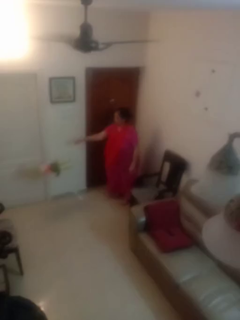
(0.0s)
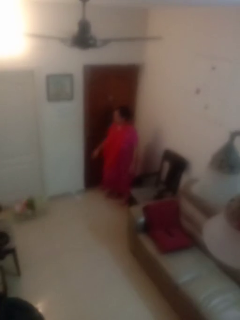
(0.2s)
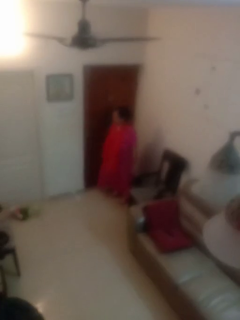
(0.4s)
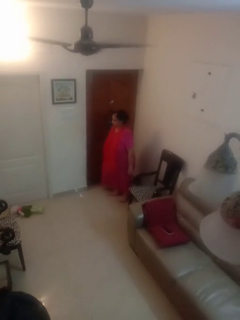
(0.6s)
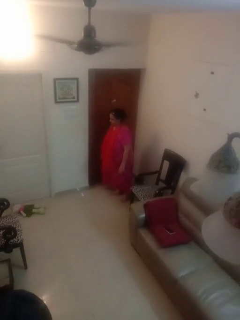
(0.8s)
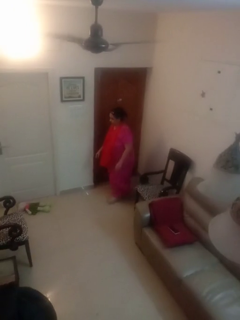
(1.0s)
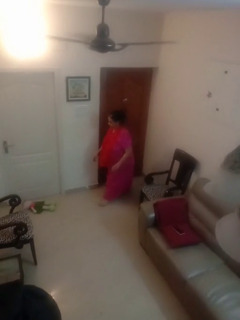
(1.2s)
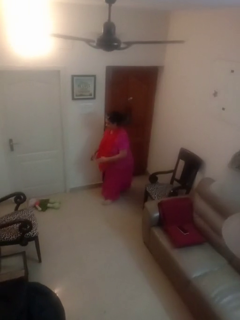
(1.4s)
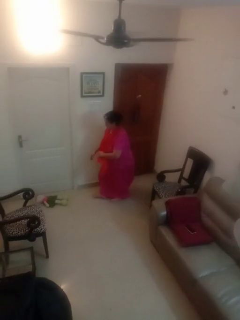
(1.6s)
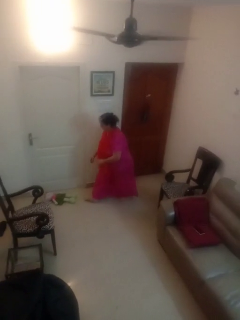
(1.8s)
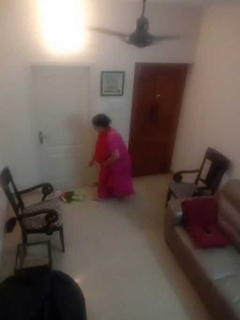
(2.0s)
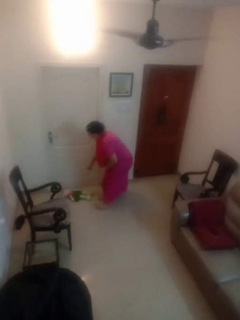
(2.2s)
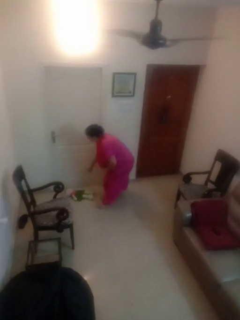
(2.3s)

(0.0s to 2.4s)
person throws object to ground

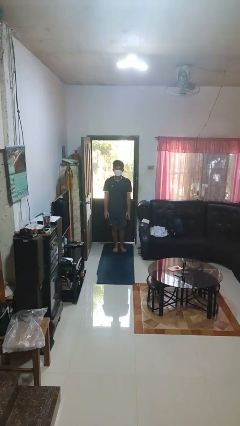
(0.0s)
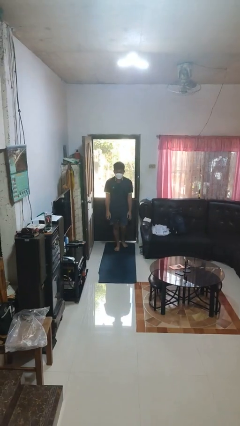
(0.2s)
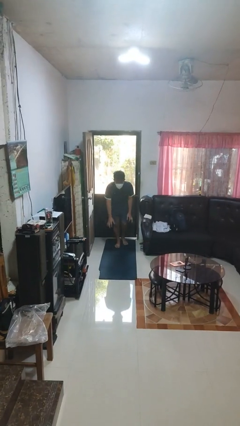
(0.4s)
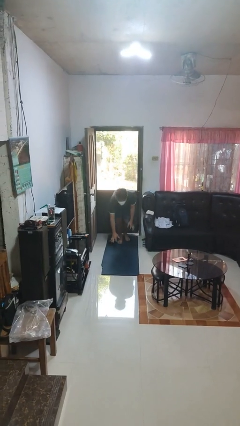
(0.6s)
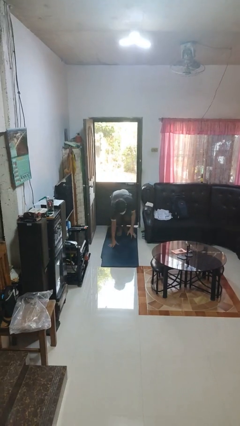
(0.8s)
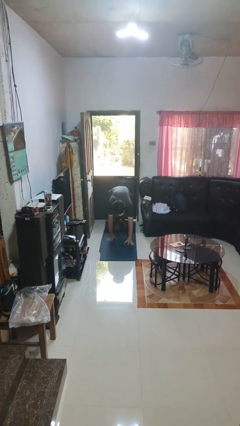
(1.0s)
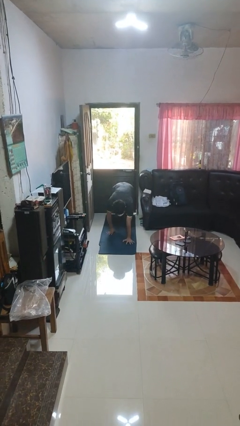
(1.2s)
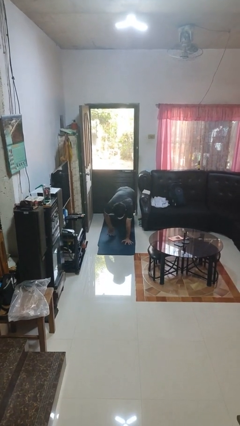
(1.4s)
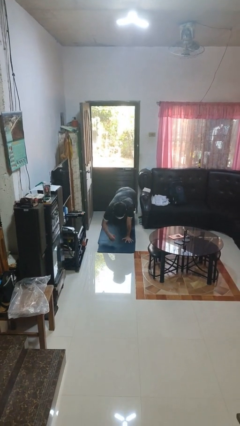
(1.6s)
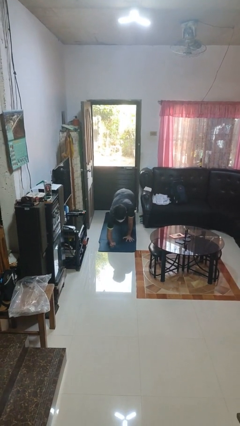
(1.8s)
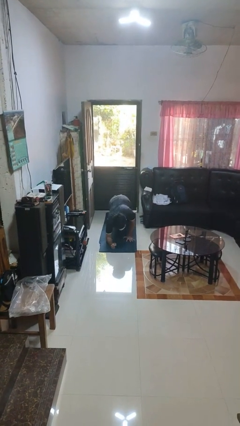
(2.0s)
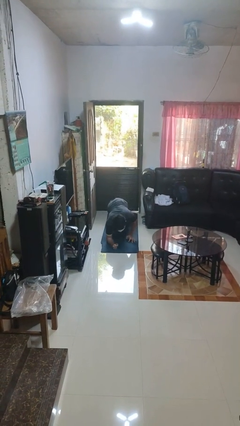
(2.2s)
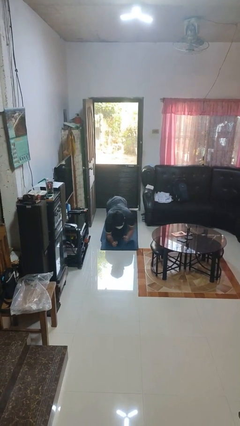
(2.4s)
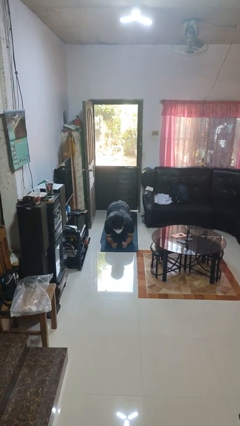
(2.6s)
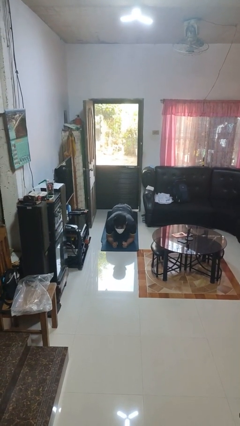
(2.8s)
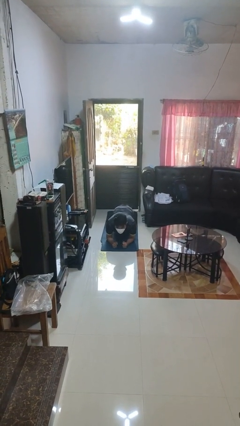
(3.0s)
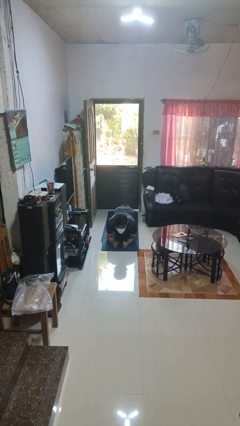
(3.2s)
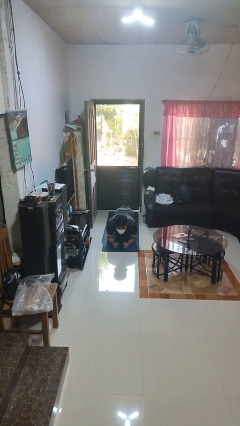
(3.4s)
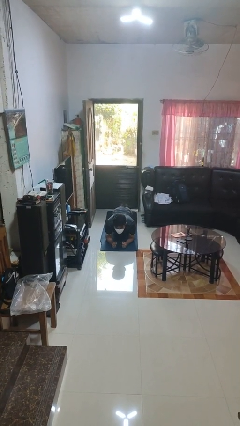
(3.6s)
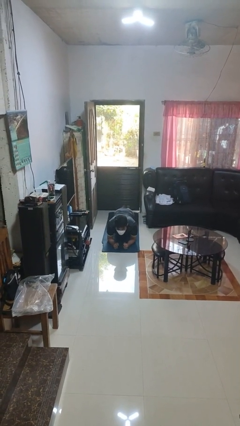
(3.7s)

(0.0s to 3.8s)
person exercises with plank

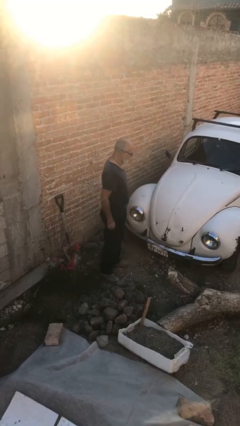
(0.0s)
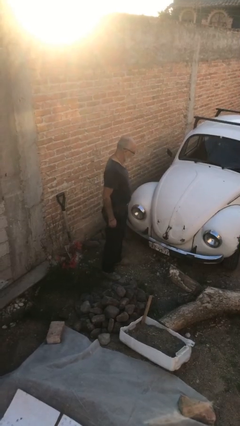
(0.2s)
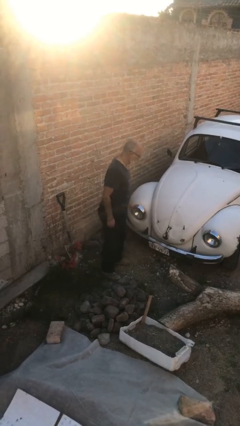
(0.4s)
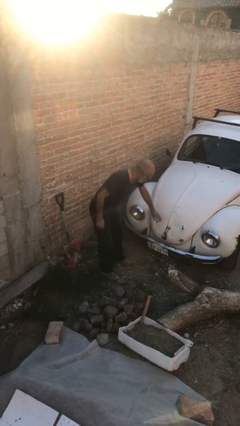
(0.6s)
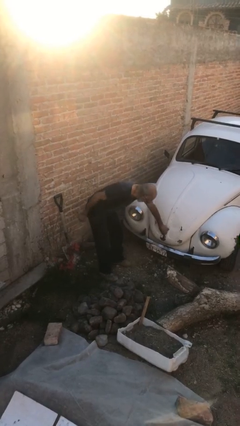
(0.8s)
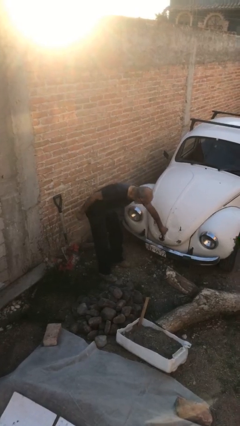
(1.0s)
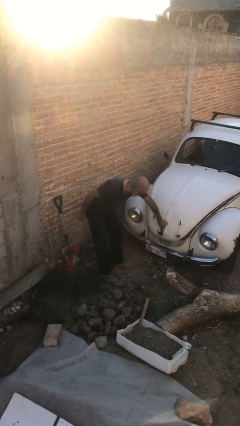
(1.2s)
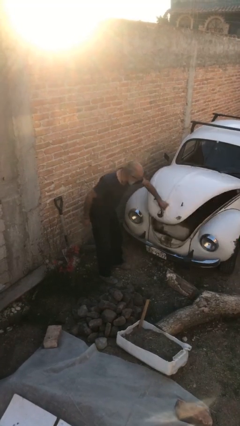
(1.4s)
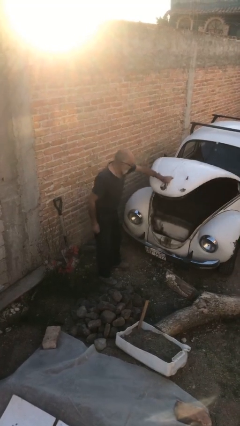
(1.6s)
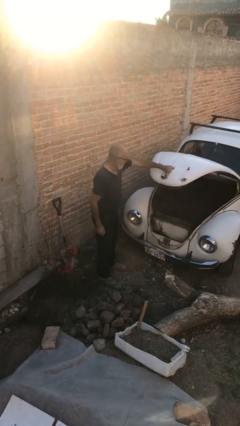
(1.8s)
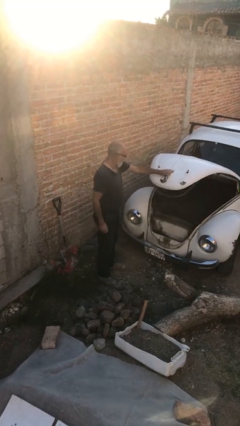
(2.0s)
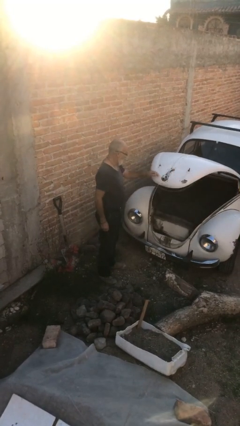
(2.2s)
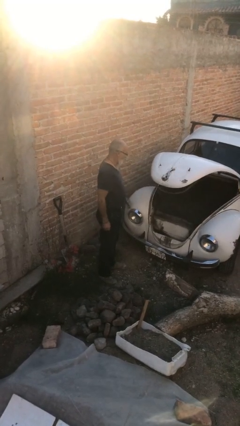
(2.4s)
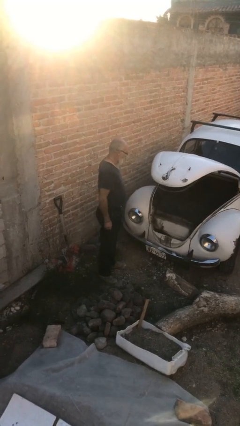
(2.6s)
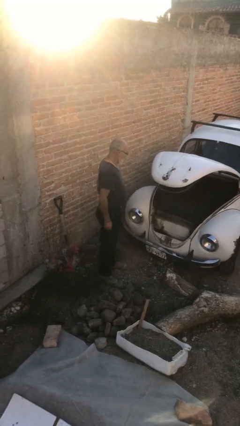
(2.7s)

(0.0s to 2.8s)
person opens car trunk

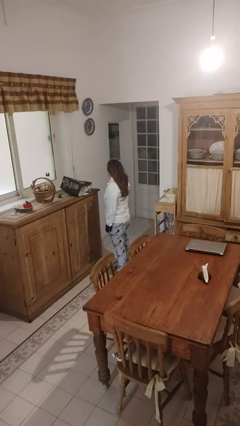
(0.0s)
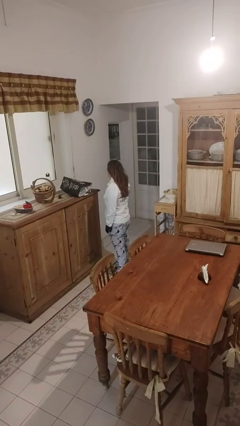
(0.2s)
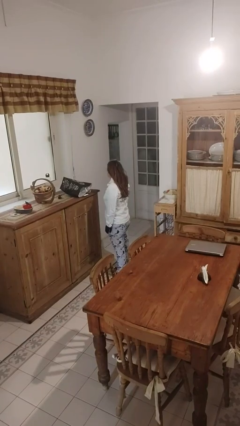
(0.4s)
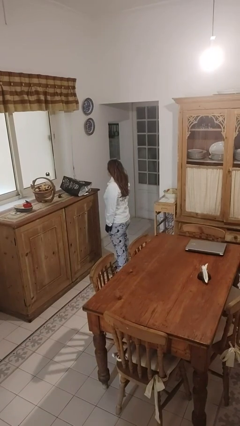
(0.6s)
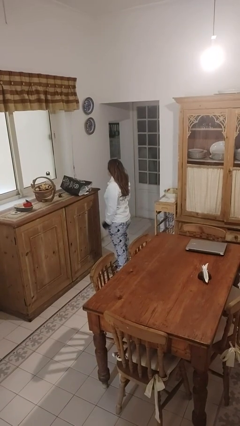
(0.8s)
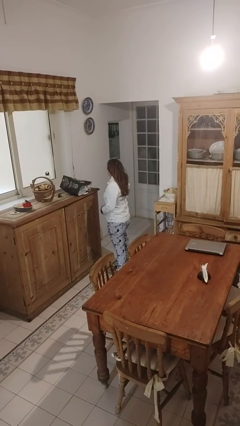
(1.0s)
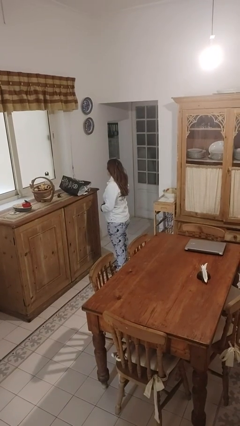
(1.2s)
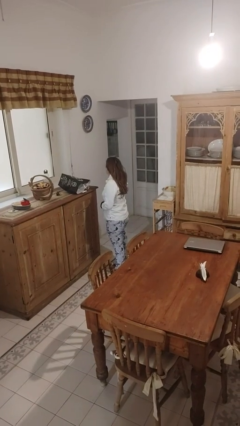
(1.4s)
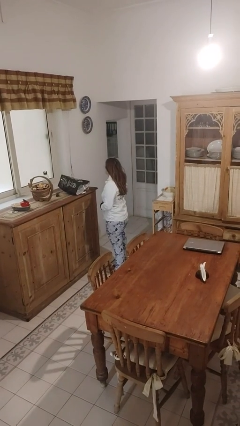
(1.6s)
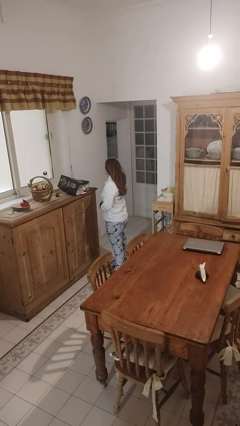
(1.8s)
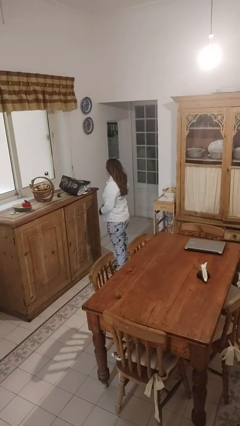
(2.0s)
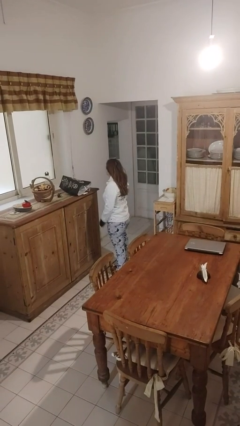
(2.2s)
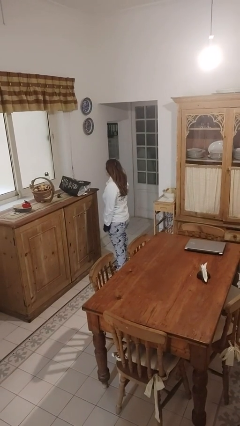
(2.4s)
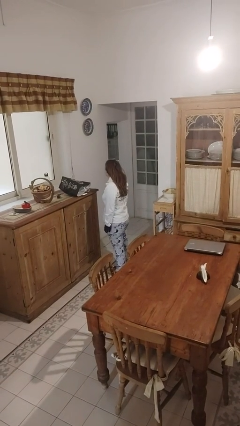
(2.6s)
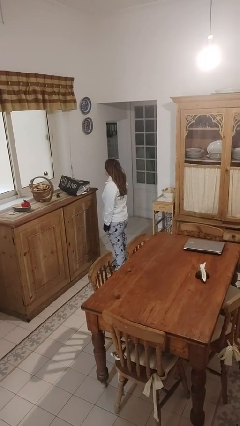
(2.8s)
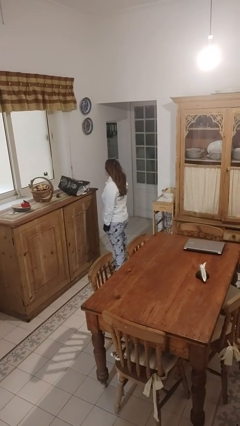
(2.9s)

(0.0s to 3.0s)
person buttons shirt

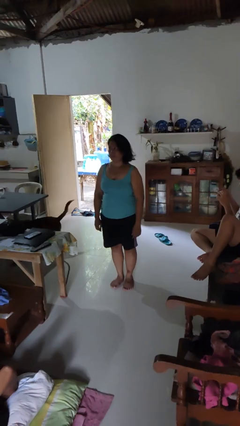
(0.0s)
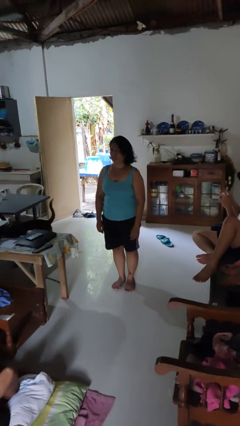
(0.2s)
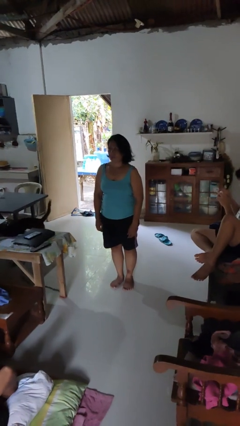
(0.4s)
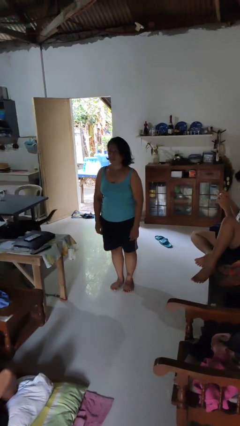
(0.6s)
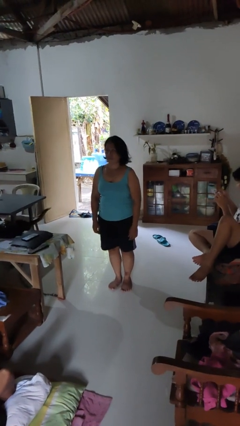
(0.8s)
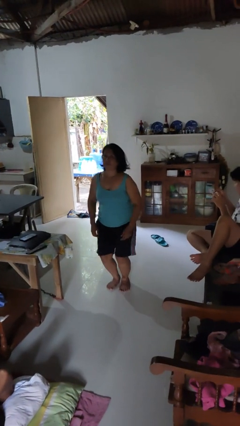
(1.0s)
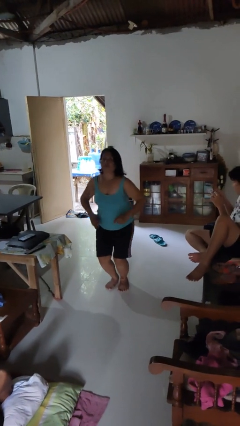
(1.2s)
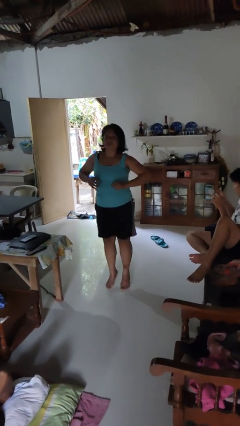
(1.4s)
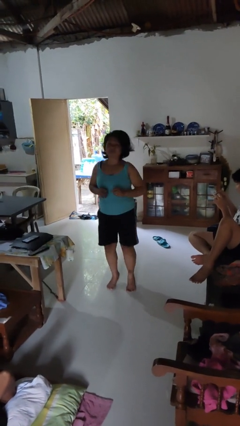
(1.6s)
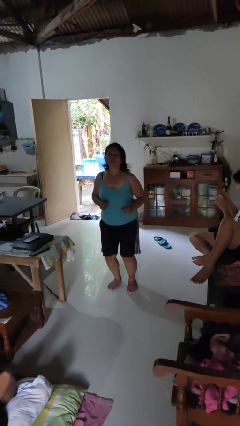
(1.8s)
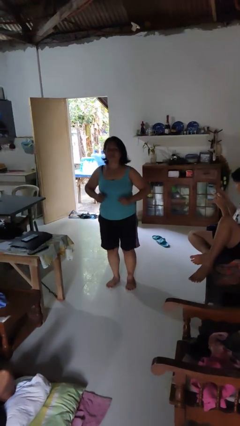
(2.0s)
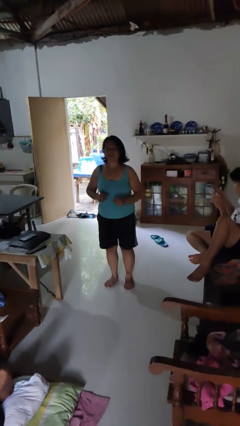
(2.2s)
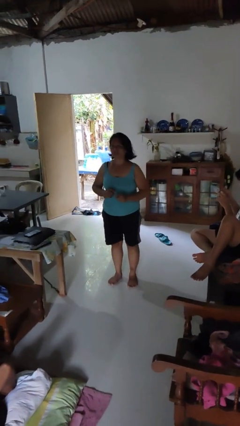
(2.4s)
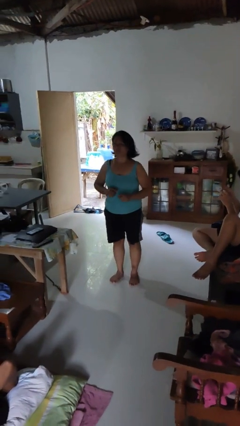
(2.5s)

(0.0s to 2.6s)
person jumps

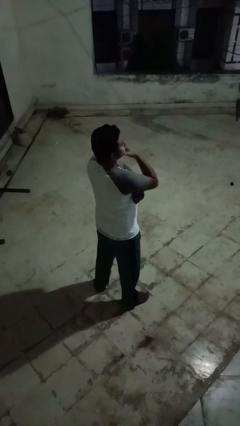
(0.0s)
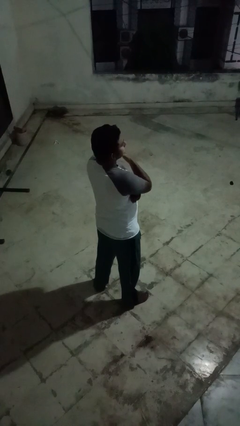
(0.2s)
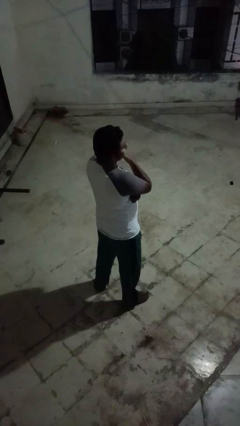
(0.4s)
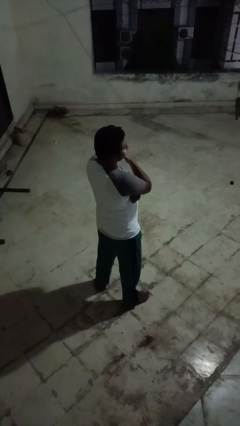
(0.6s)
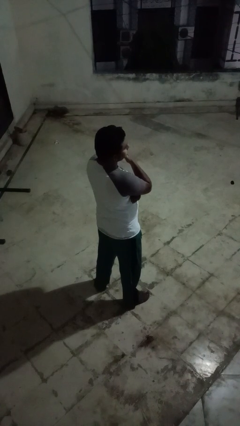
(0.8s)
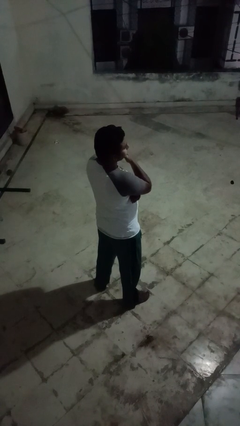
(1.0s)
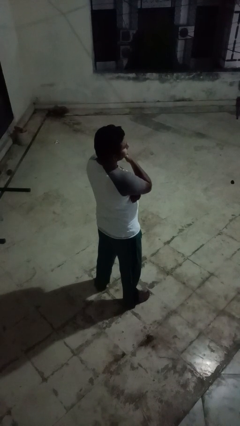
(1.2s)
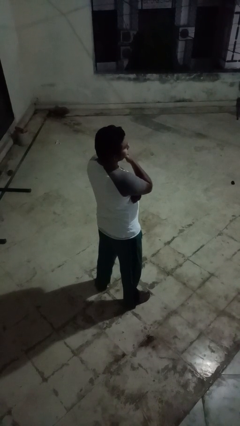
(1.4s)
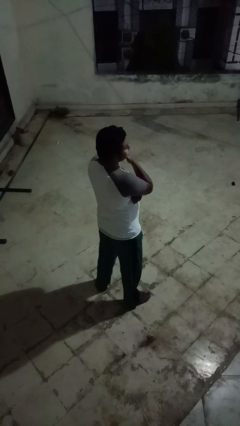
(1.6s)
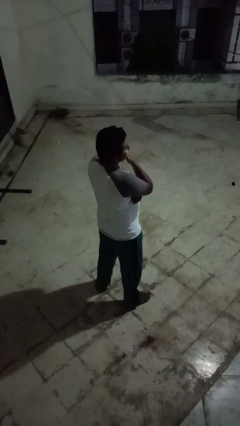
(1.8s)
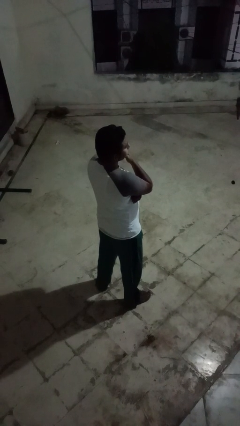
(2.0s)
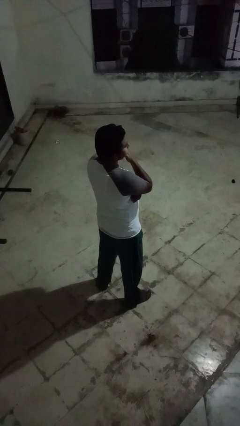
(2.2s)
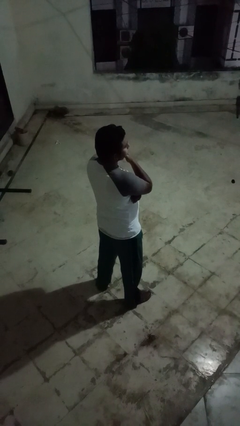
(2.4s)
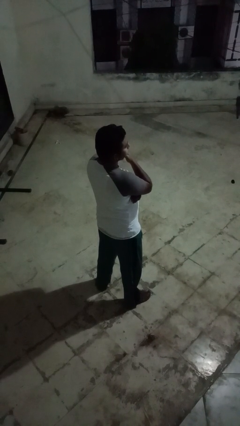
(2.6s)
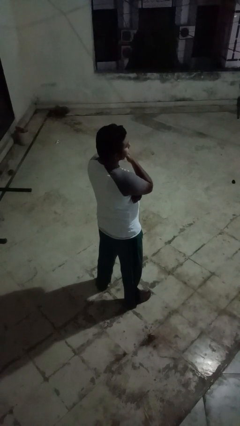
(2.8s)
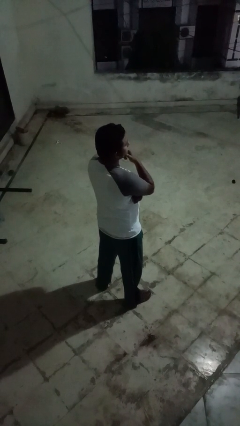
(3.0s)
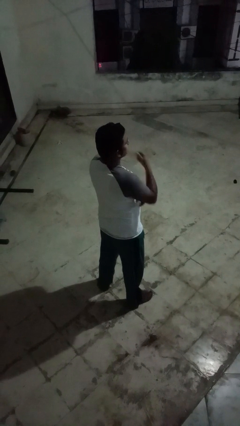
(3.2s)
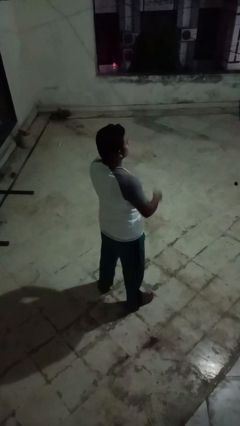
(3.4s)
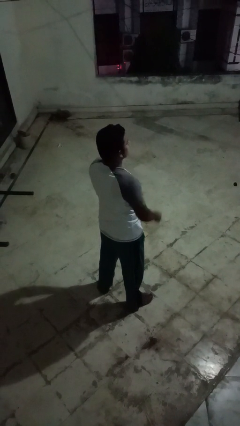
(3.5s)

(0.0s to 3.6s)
person strokes chin
